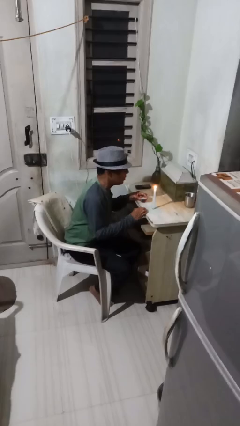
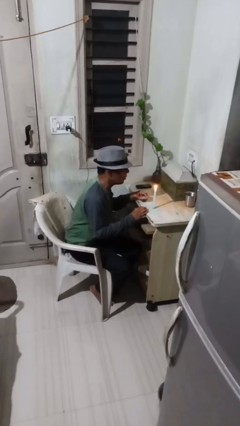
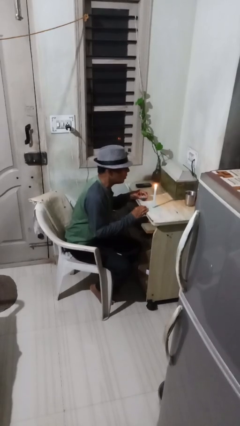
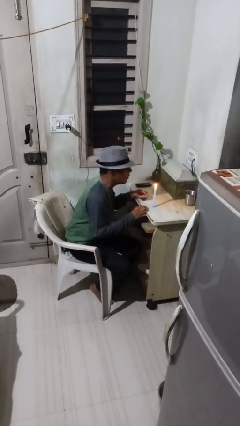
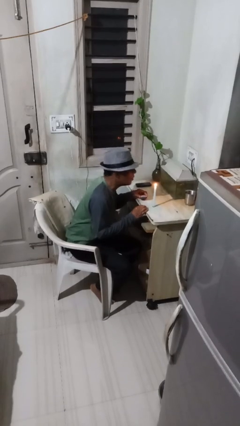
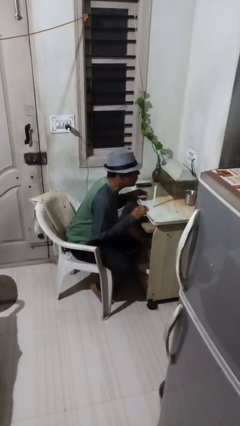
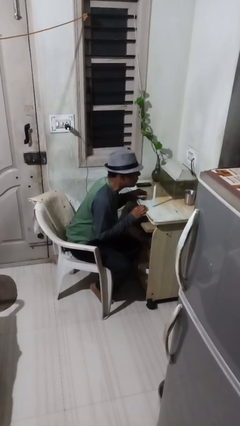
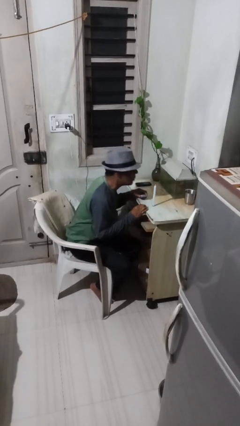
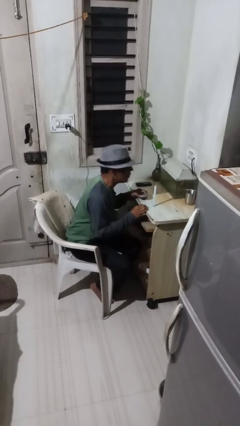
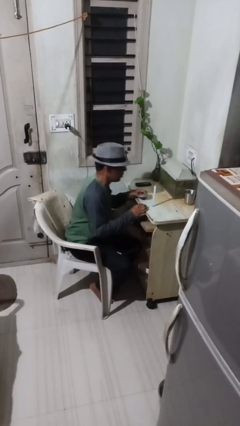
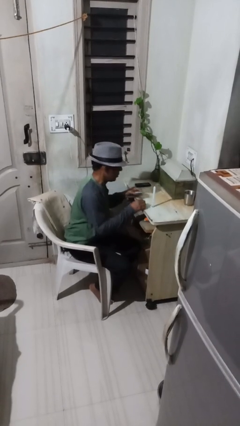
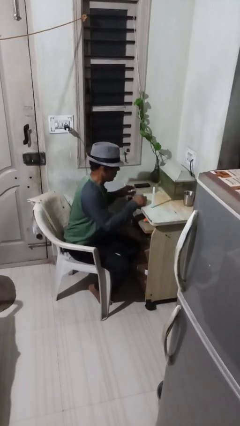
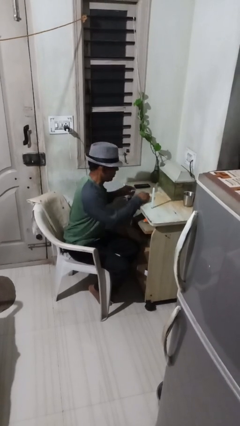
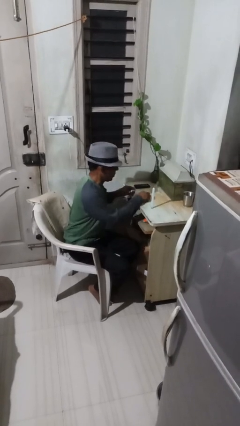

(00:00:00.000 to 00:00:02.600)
person extinguishes candle

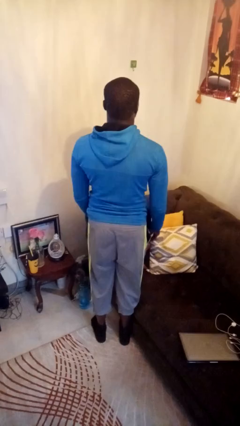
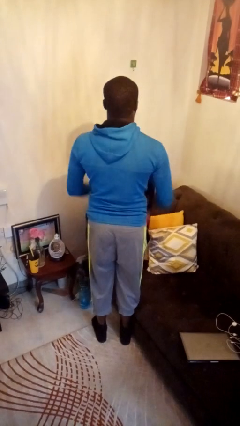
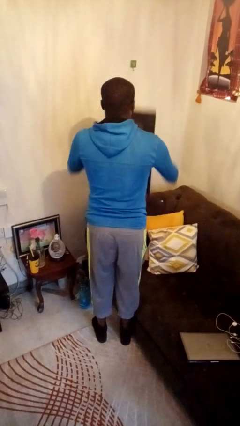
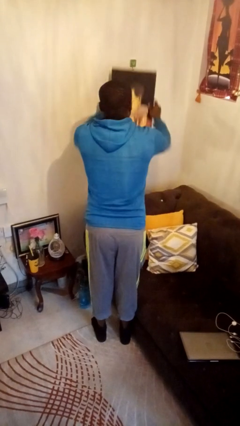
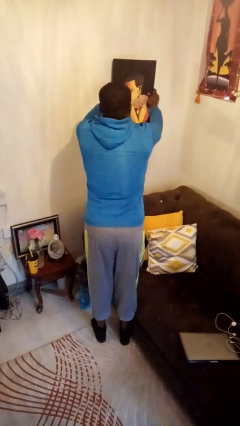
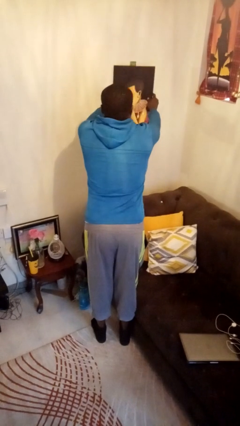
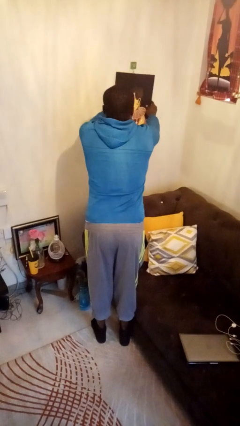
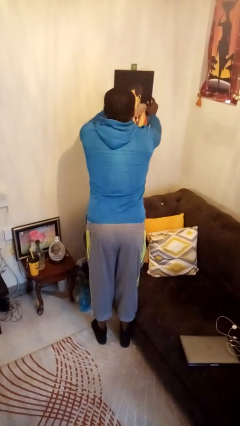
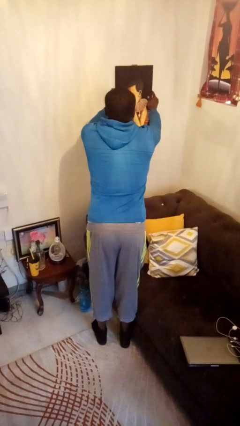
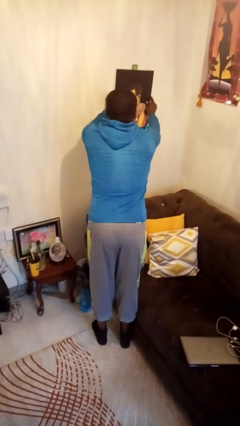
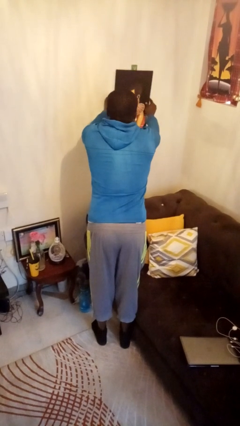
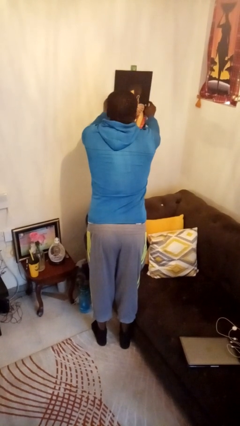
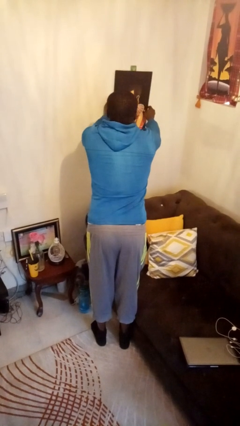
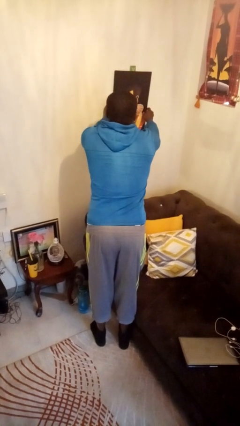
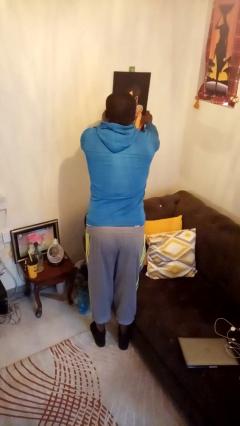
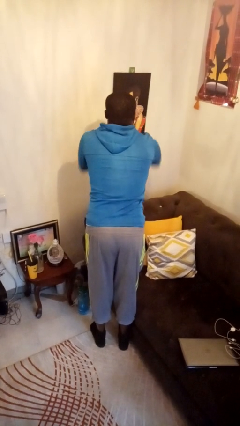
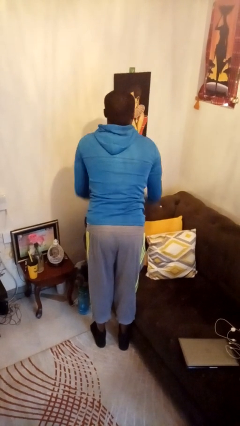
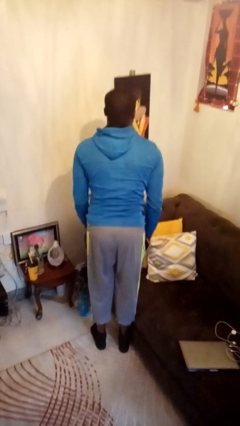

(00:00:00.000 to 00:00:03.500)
person puts up picture frame

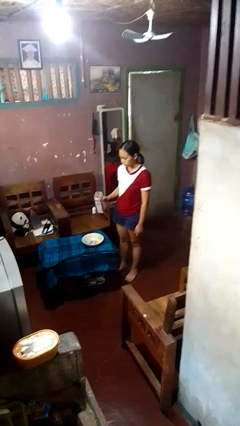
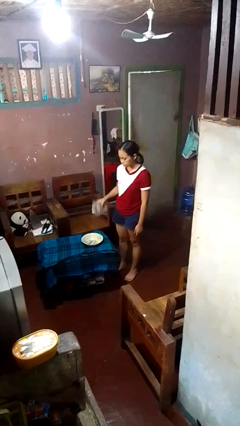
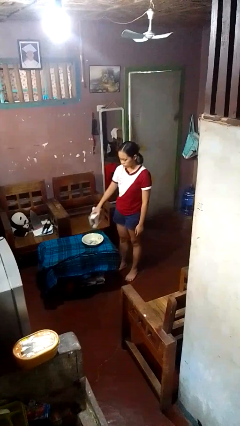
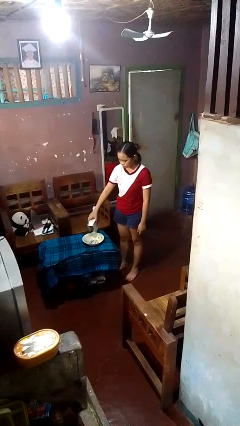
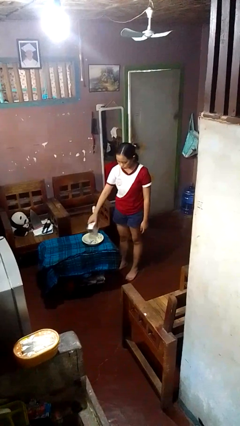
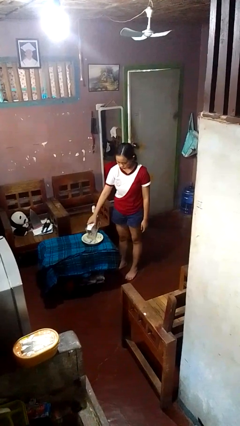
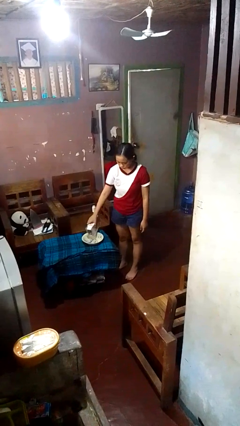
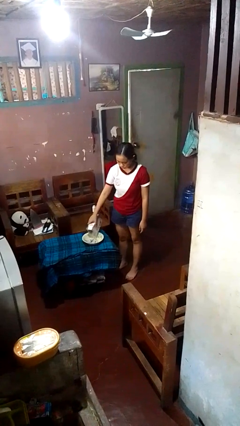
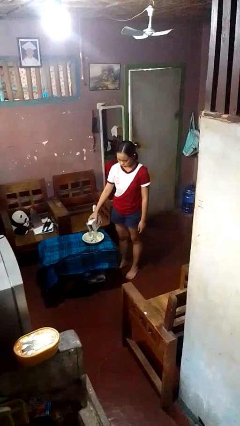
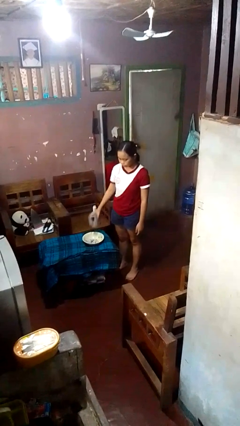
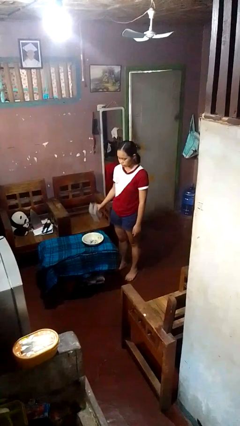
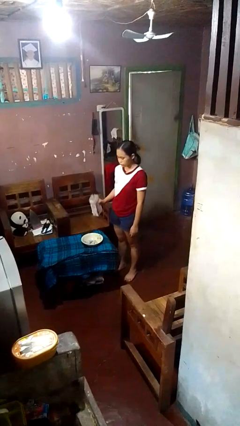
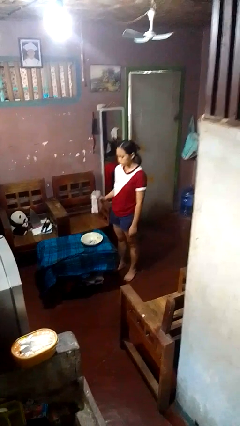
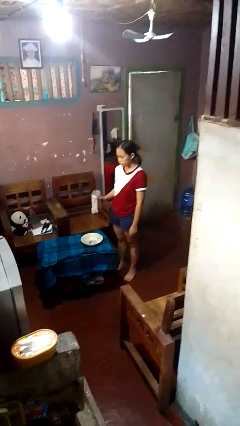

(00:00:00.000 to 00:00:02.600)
person pours into bowl

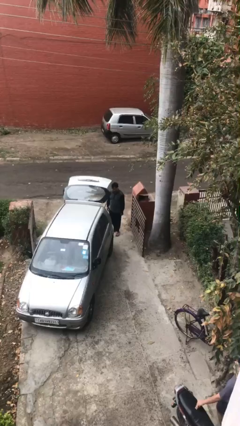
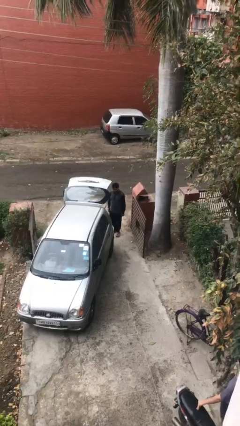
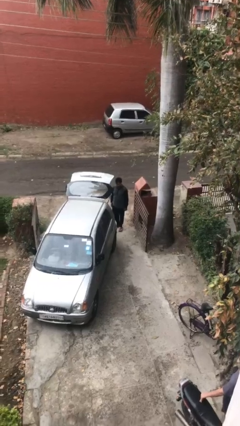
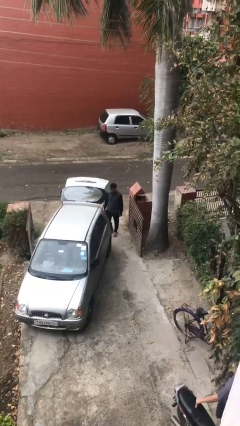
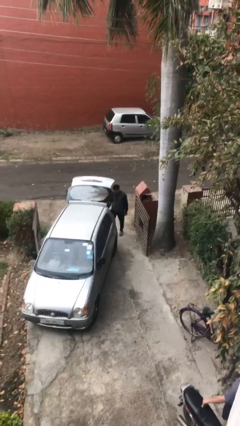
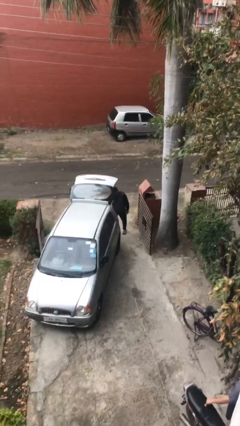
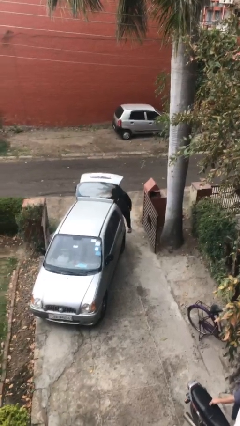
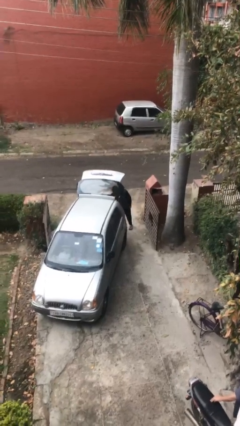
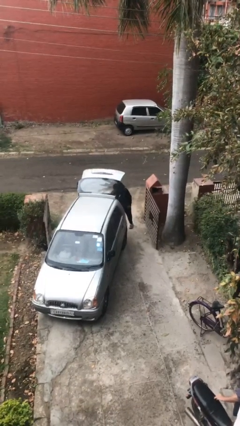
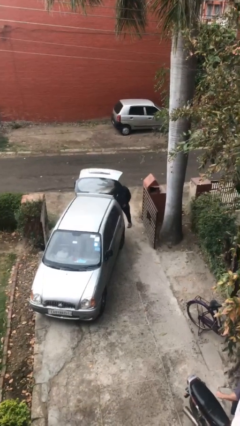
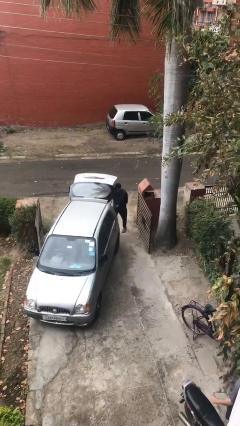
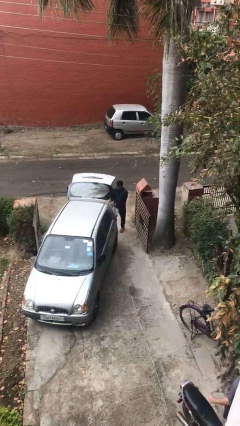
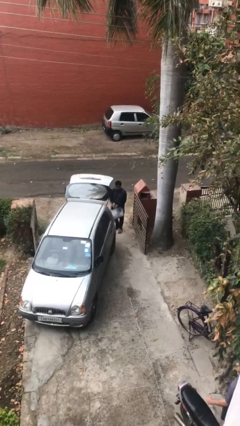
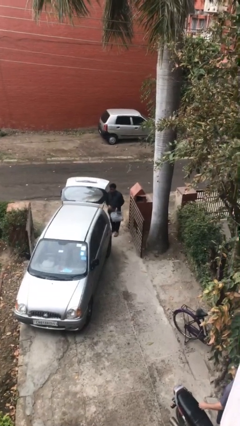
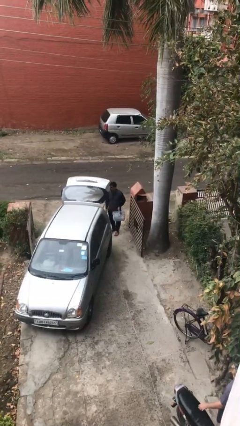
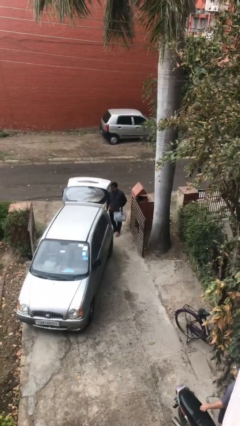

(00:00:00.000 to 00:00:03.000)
person unloads car

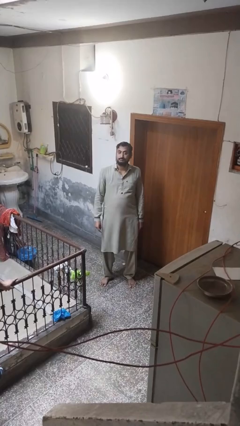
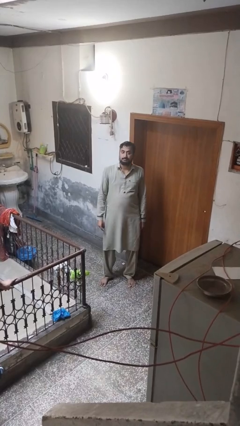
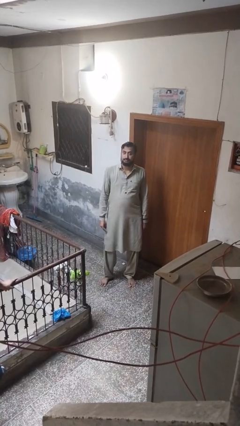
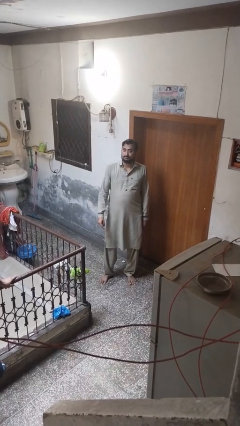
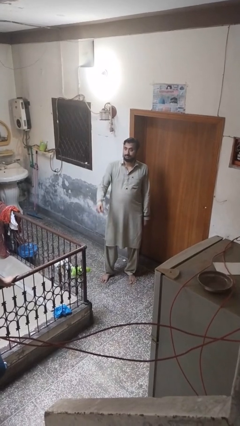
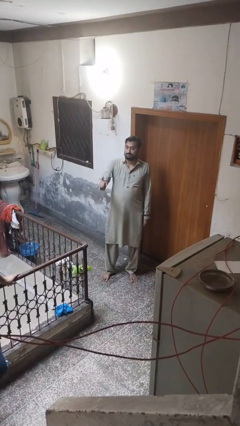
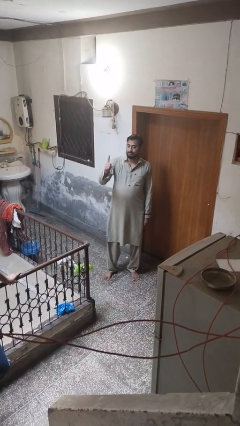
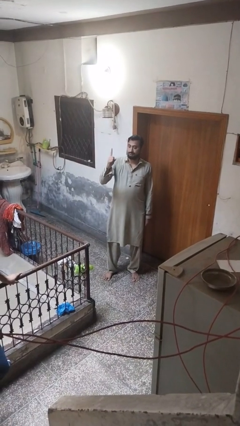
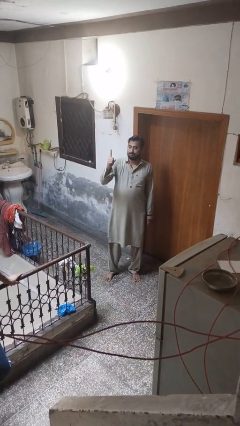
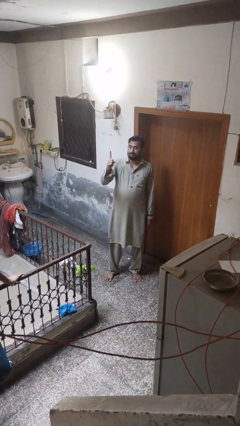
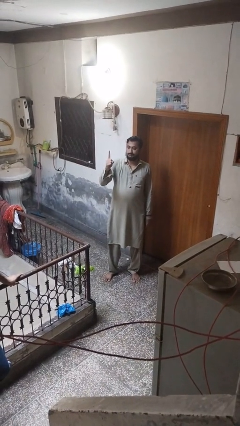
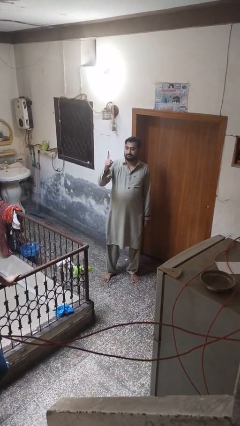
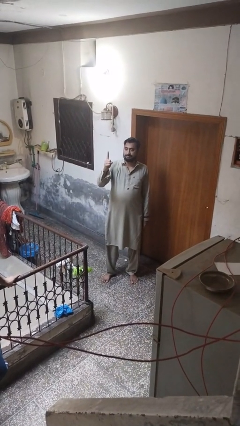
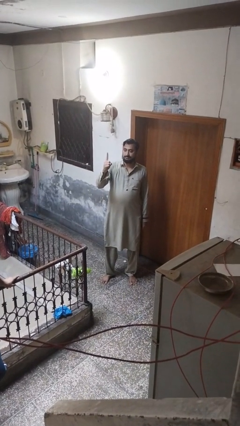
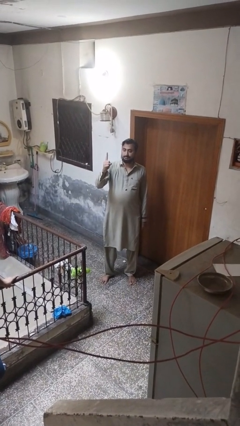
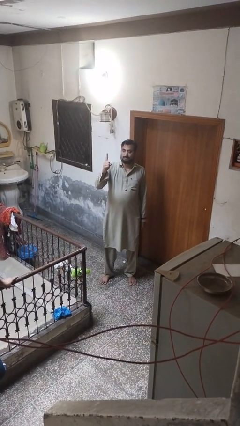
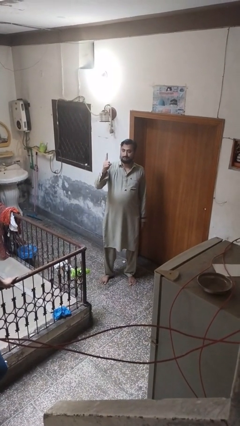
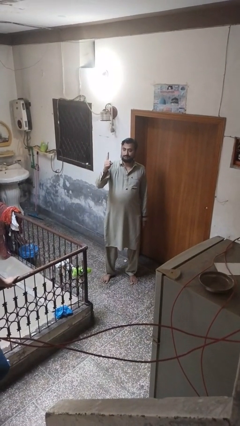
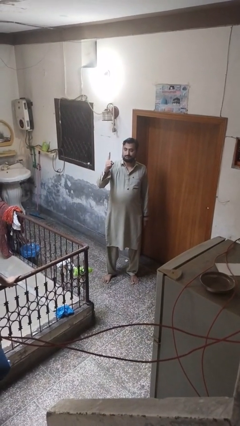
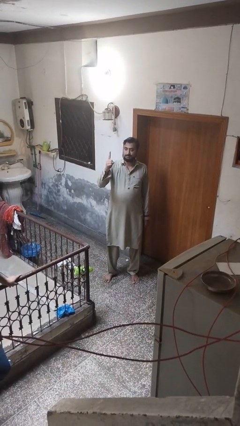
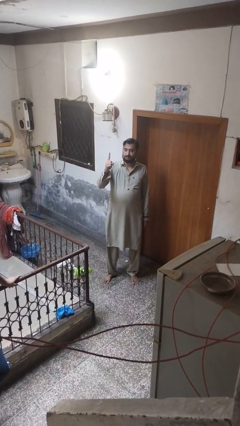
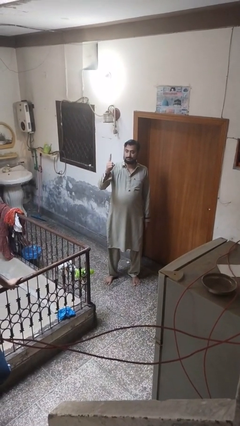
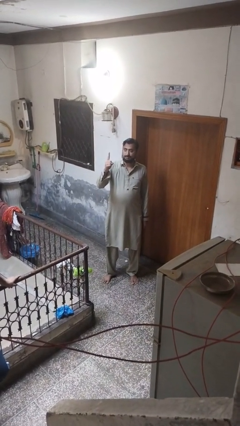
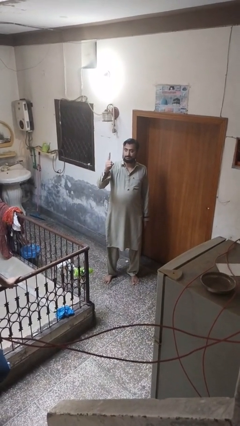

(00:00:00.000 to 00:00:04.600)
person gestures number one

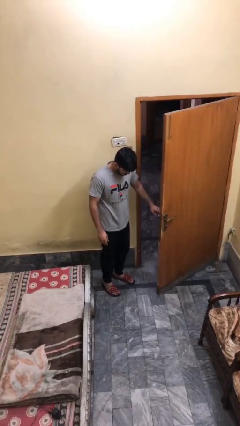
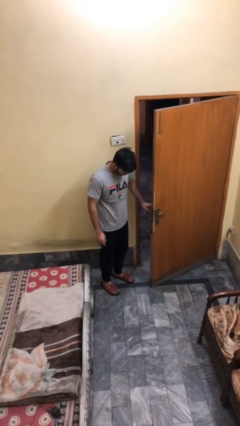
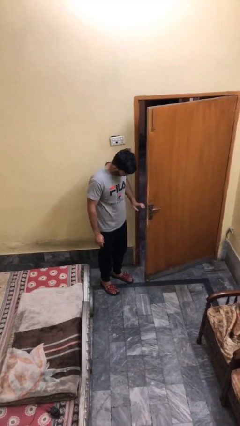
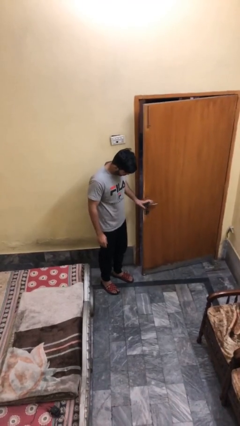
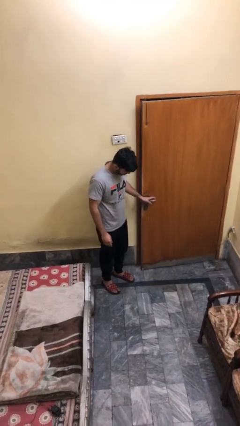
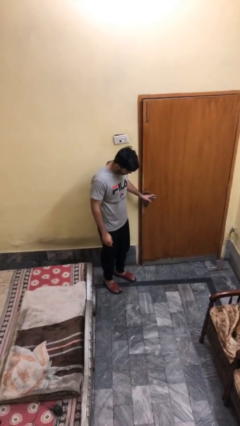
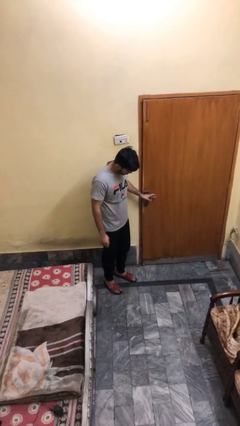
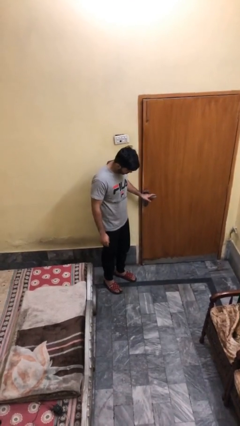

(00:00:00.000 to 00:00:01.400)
person closes facility door
